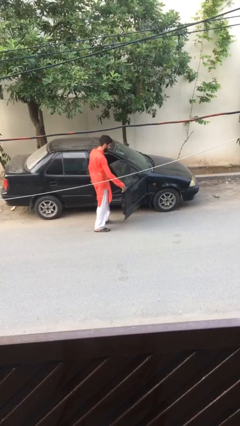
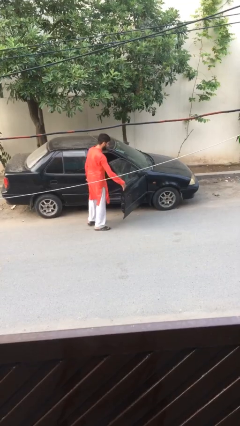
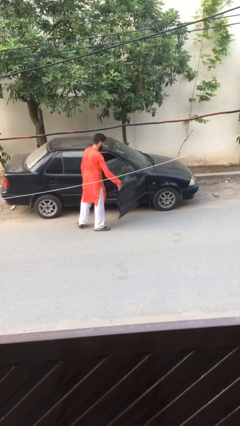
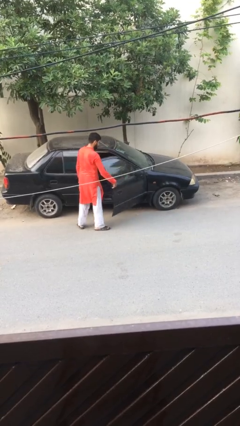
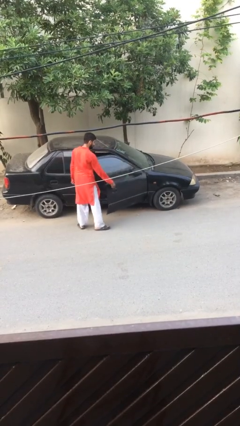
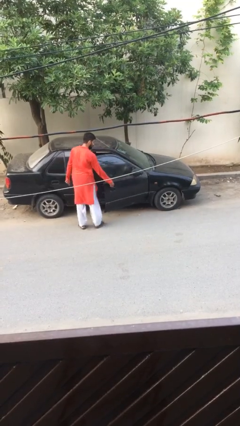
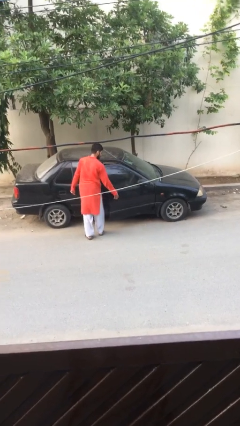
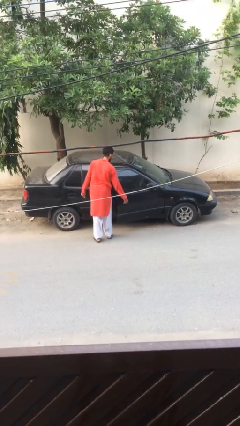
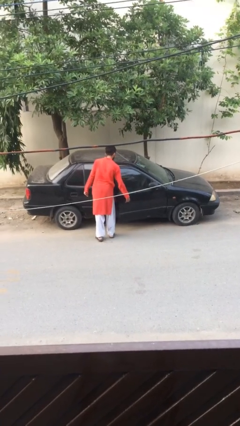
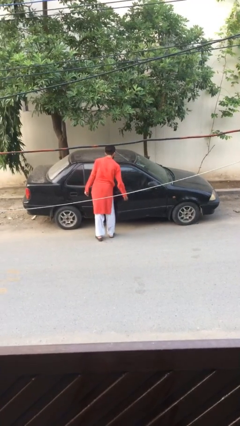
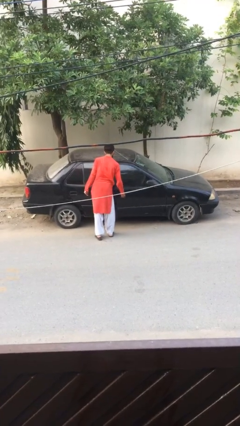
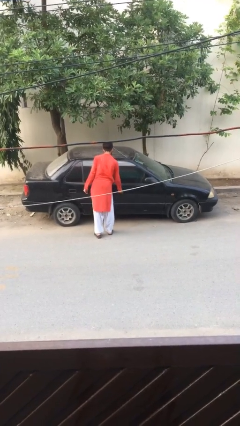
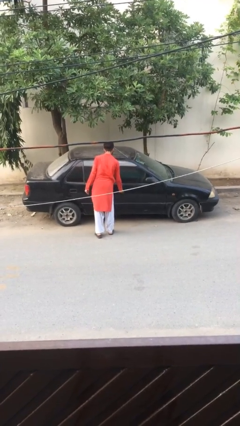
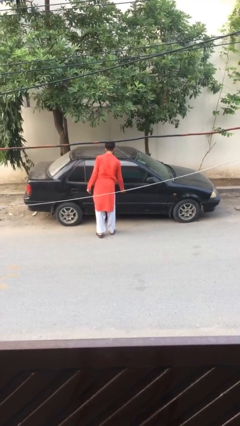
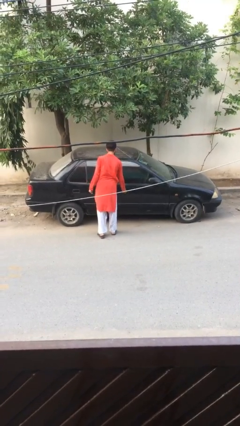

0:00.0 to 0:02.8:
person closes car door

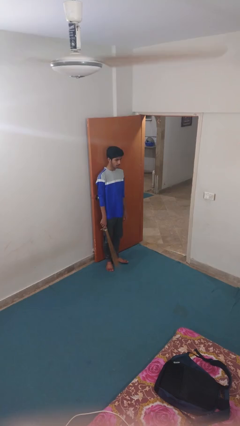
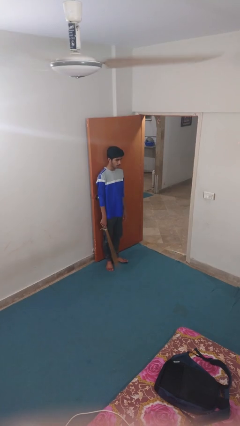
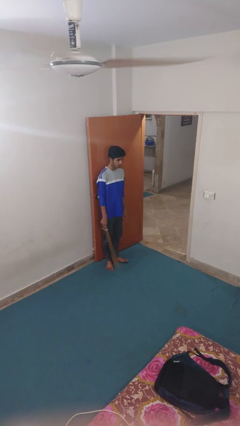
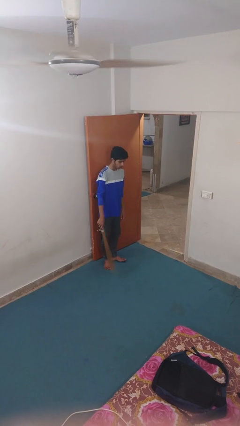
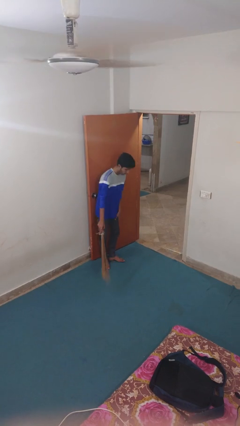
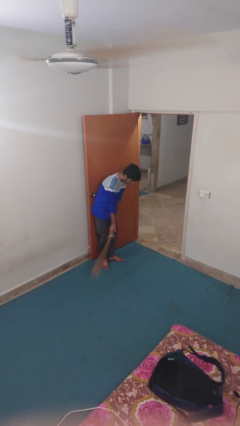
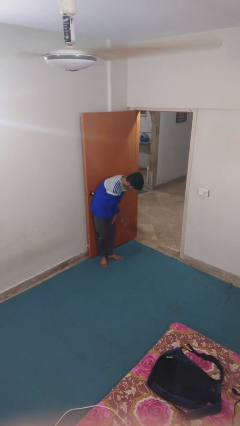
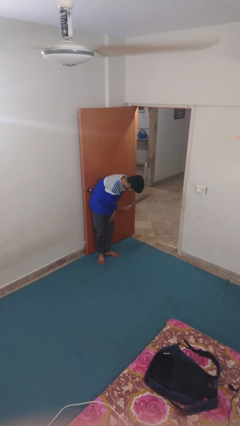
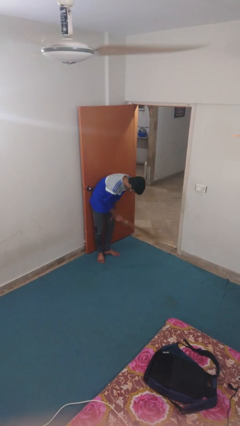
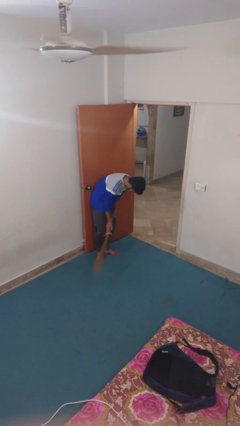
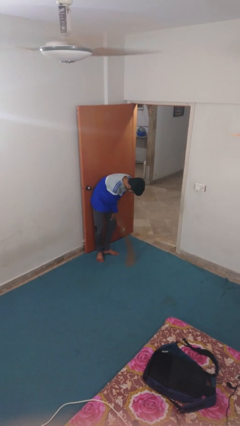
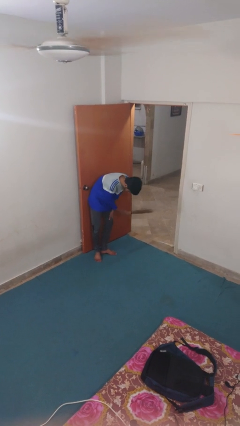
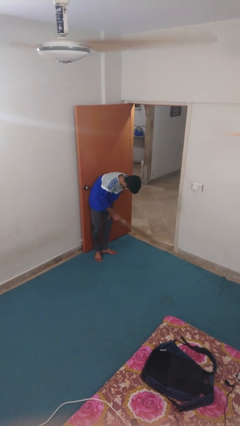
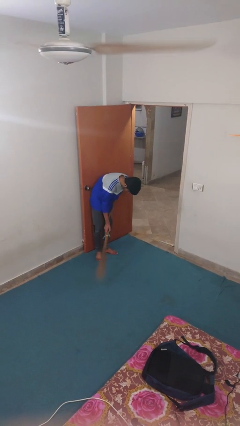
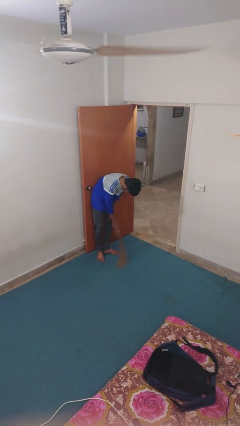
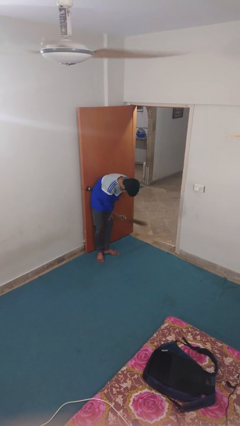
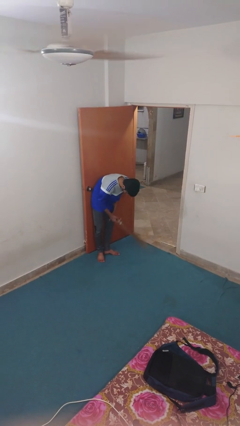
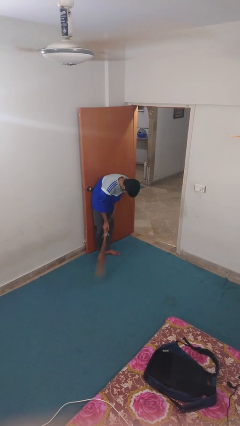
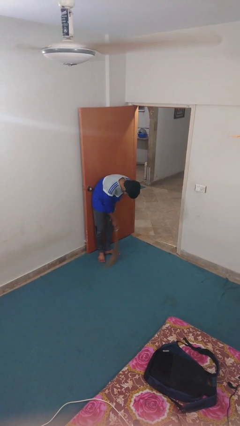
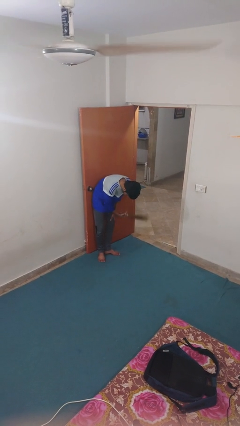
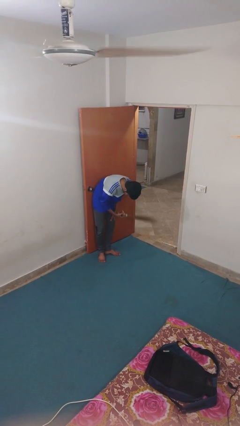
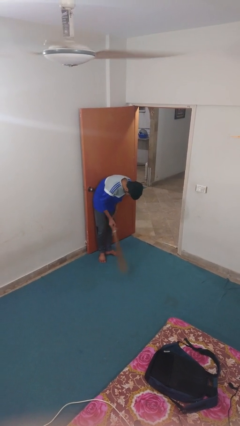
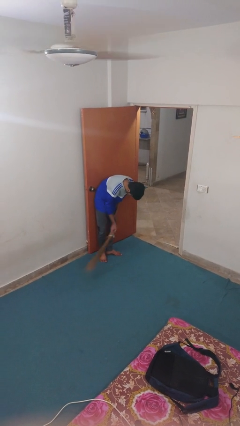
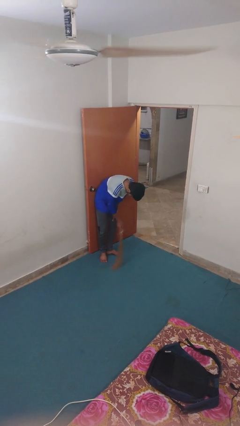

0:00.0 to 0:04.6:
person sweeps floor

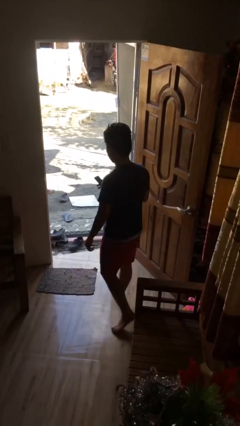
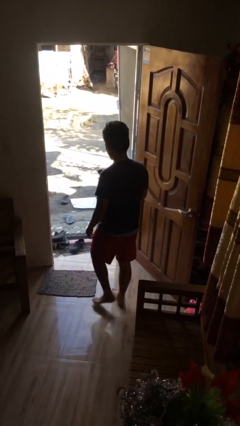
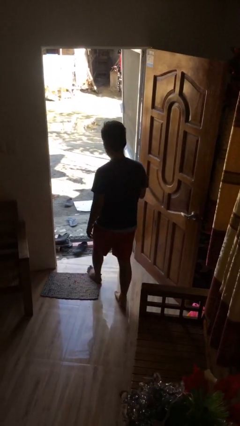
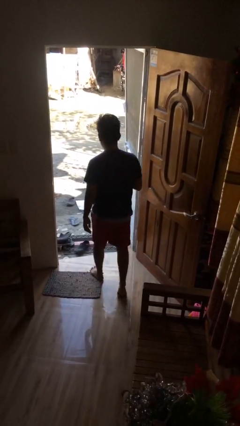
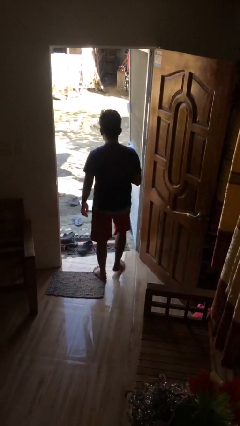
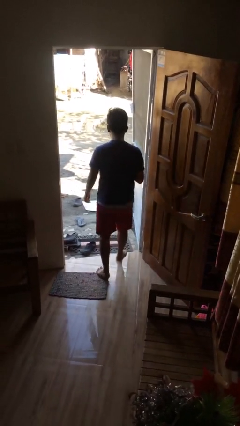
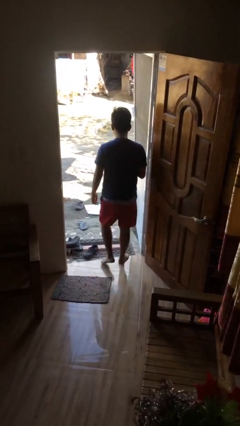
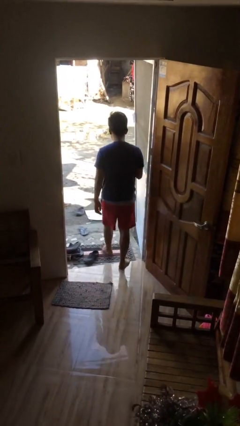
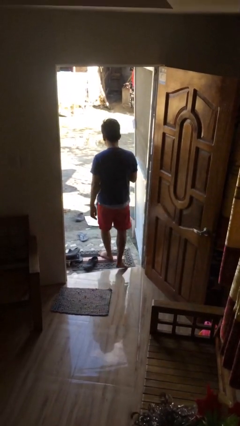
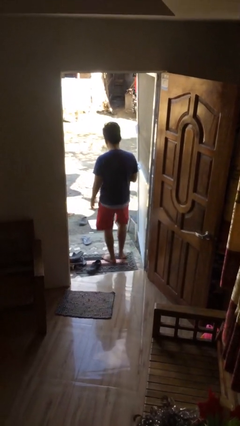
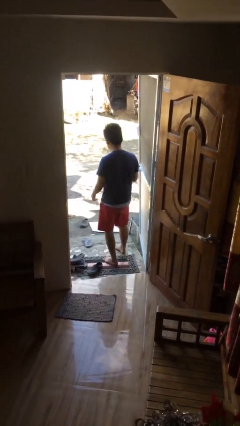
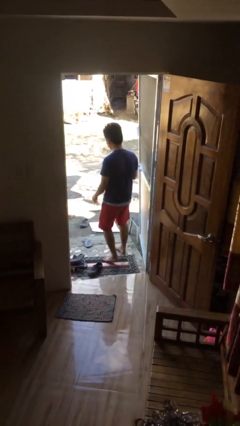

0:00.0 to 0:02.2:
person exits scene through structure

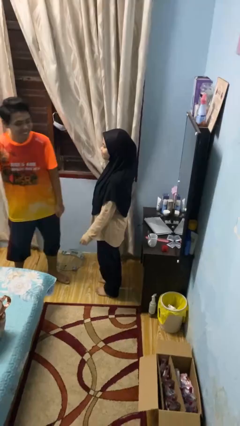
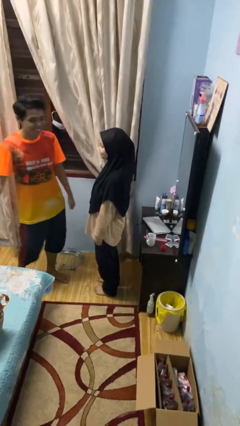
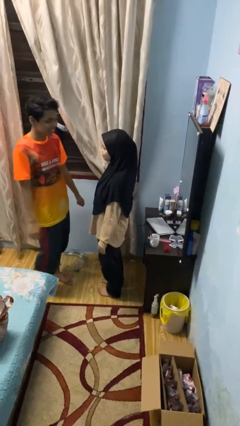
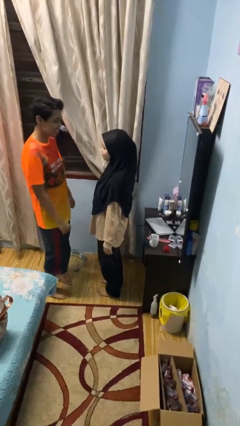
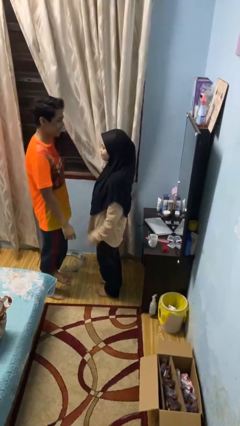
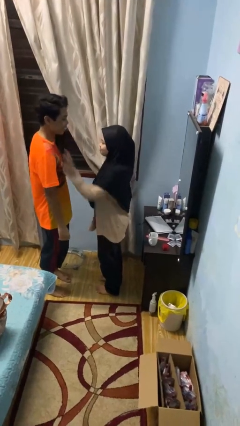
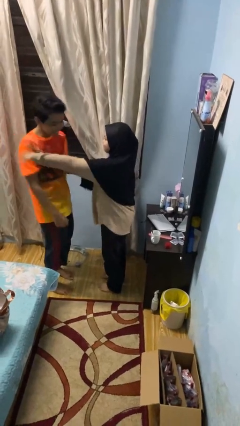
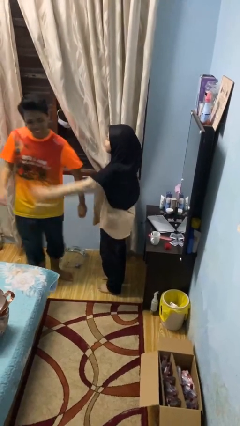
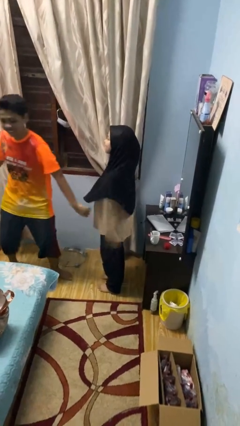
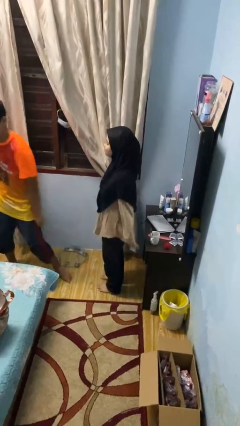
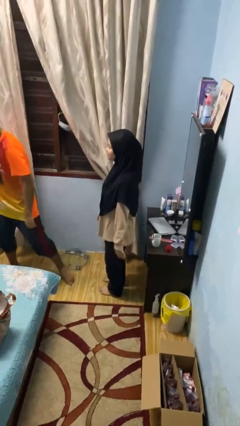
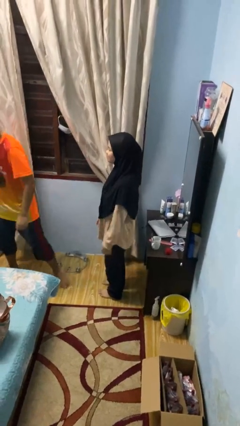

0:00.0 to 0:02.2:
person shoves person

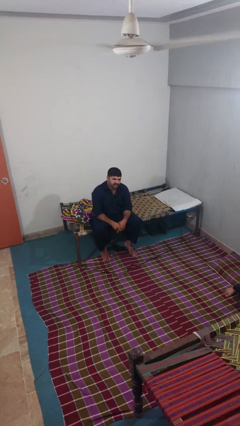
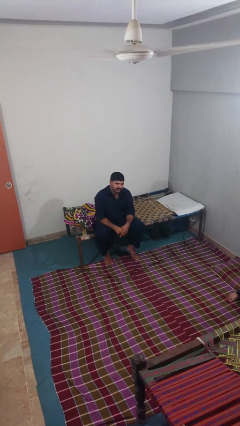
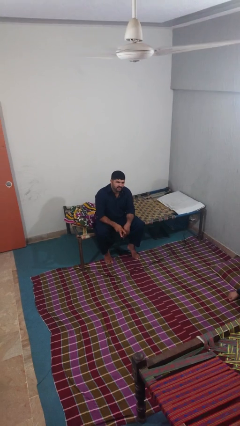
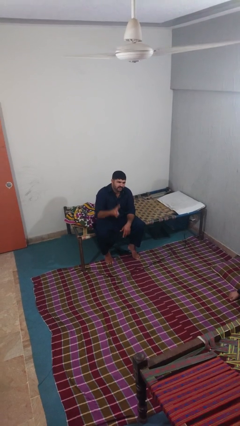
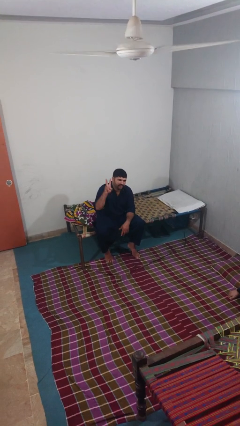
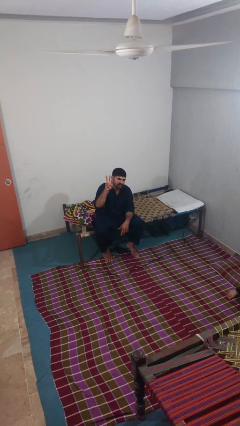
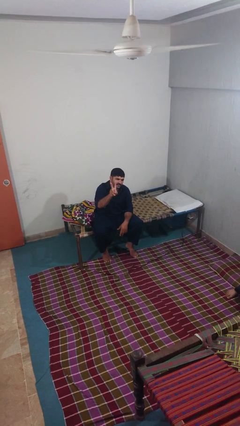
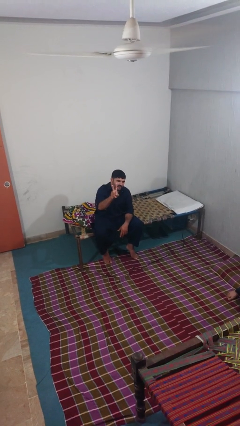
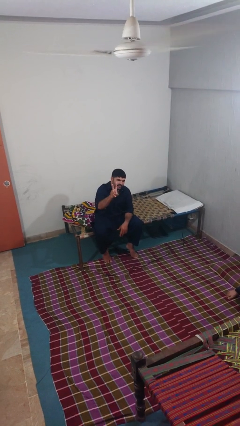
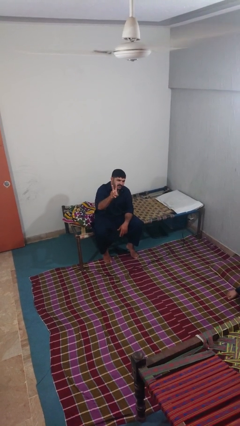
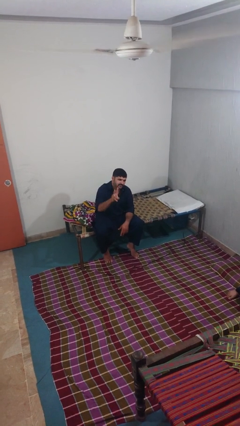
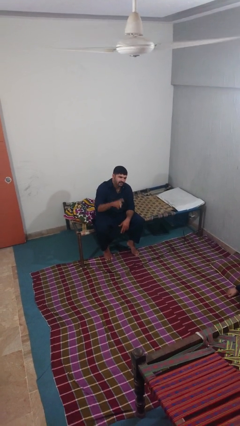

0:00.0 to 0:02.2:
person gestures peace

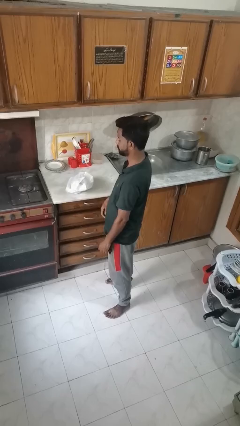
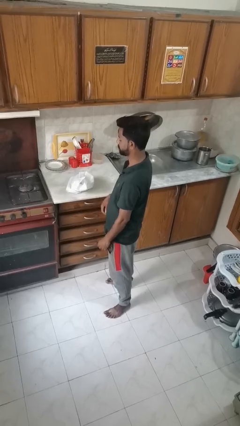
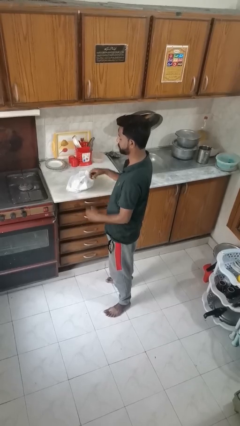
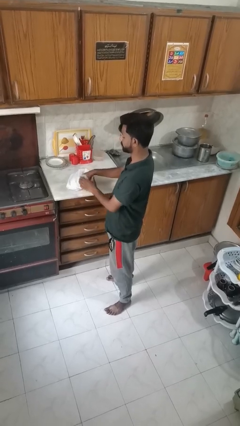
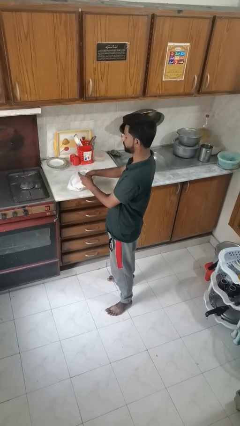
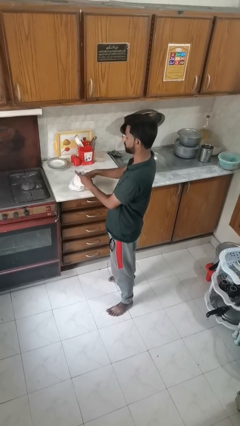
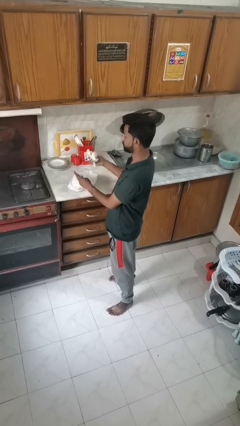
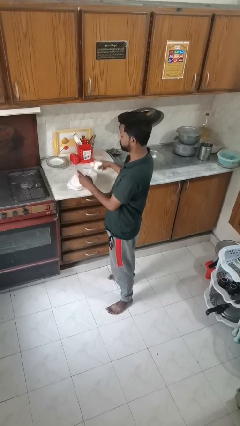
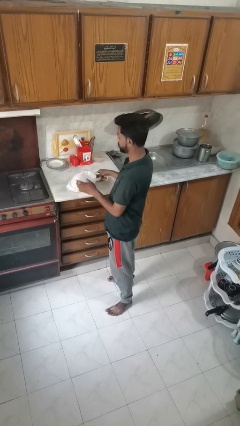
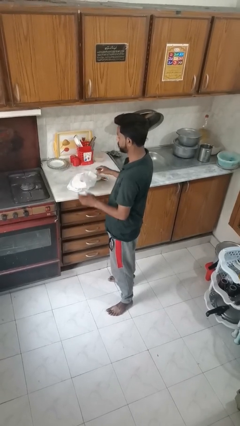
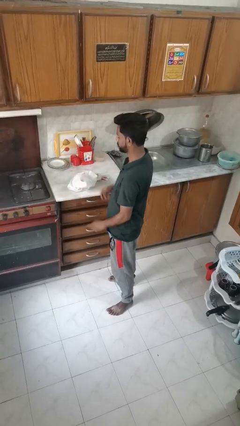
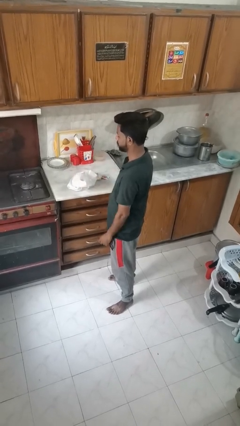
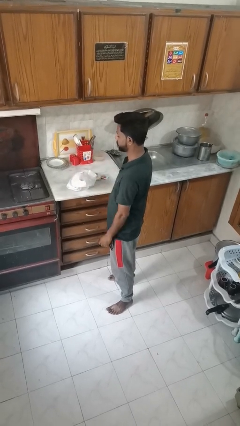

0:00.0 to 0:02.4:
person takes object from bag

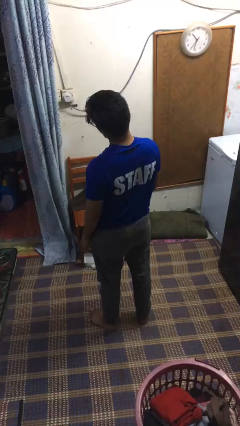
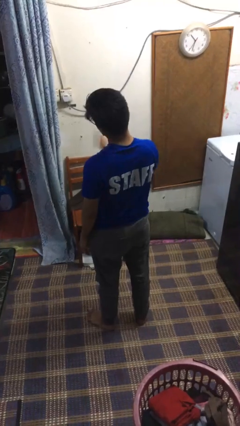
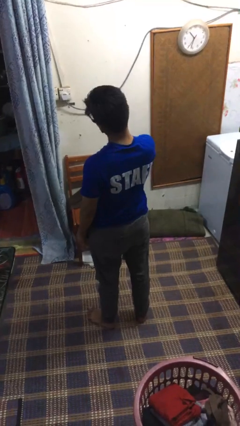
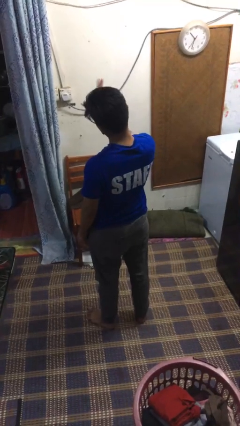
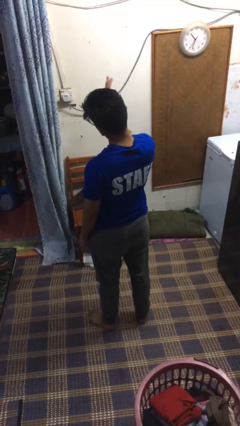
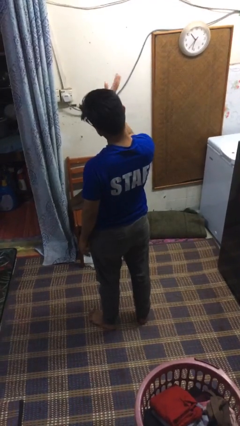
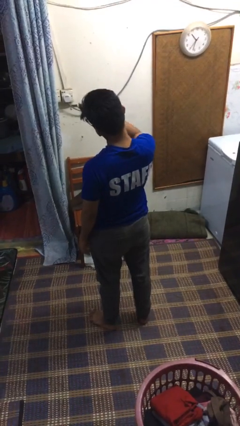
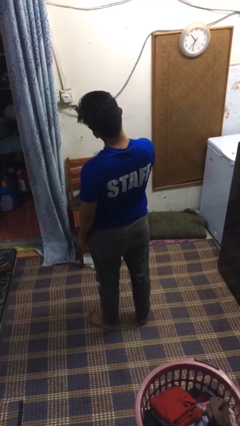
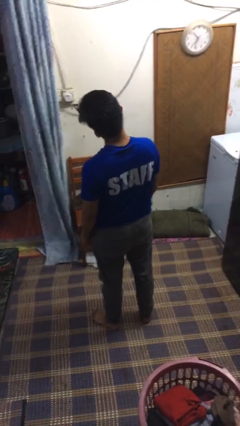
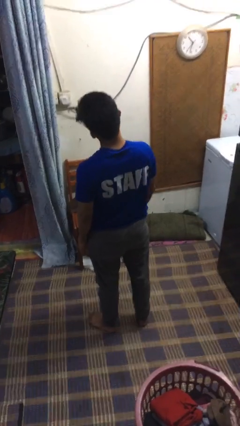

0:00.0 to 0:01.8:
person waves at person
